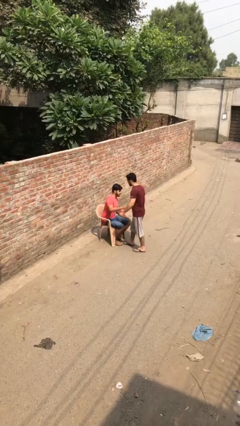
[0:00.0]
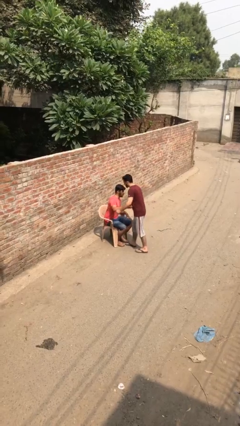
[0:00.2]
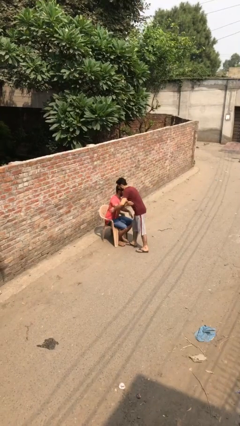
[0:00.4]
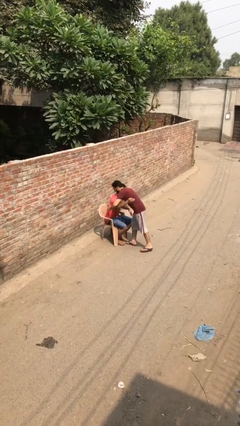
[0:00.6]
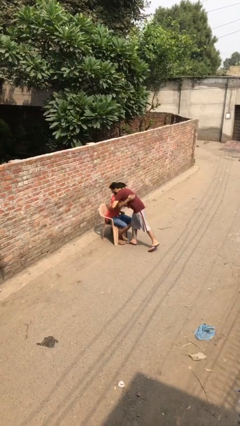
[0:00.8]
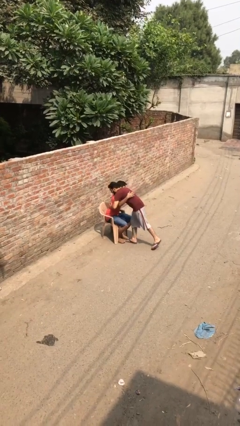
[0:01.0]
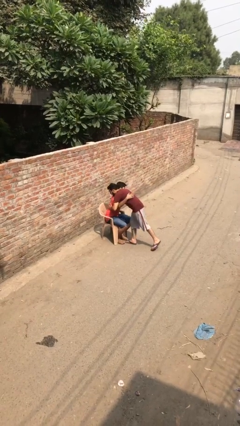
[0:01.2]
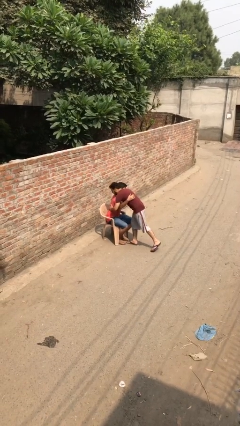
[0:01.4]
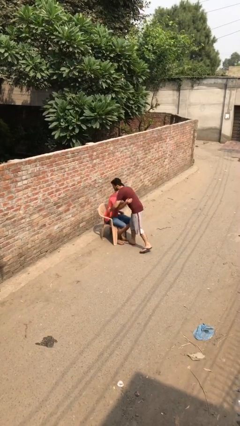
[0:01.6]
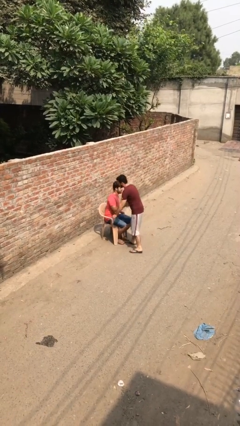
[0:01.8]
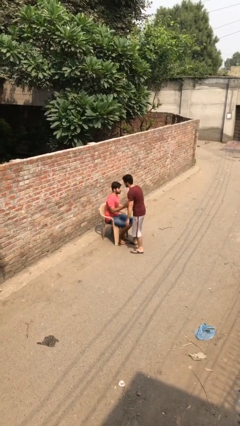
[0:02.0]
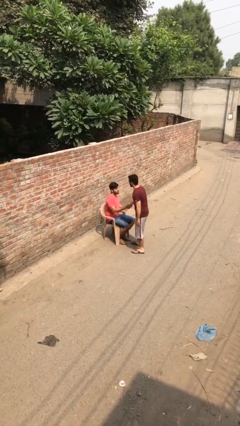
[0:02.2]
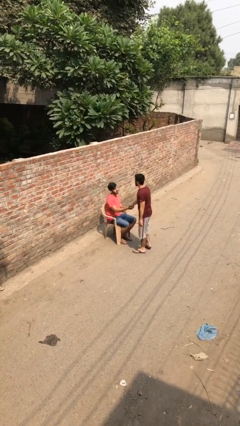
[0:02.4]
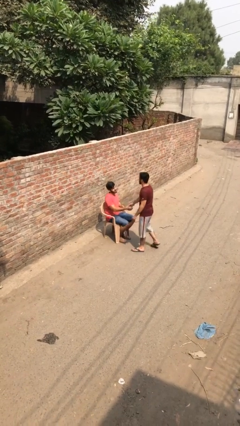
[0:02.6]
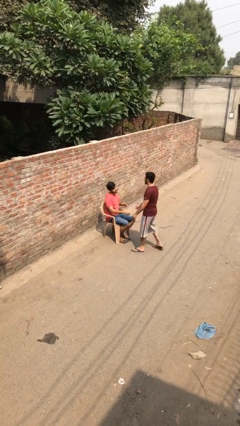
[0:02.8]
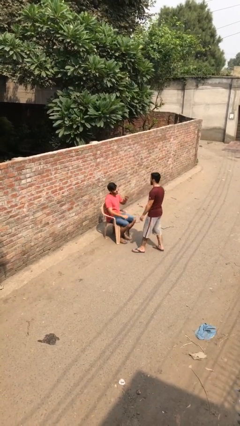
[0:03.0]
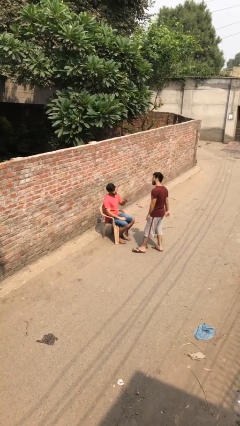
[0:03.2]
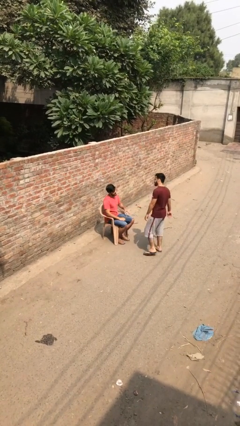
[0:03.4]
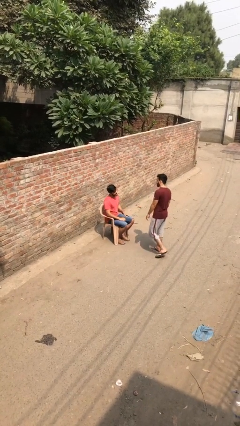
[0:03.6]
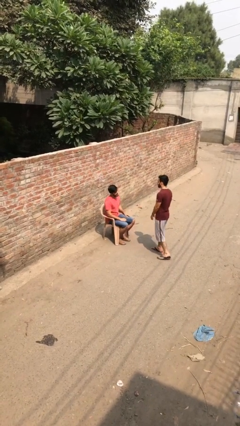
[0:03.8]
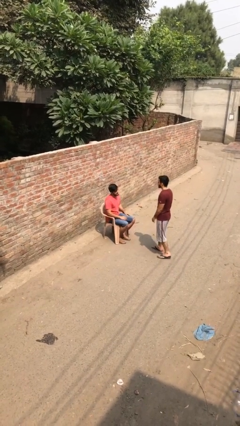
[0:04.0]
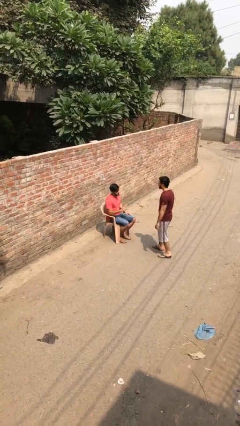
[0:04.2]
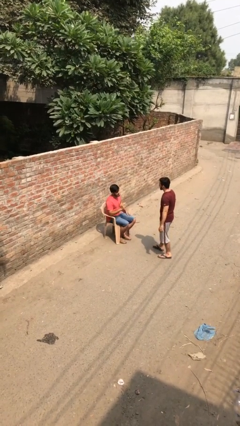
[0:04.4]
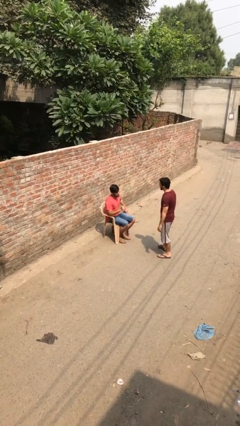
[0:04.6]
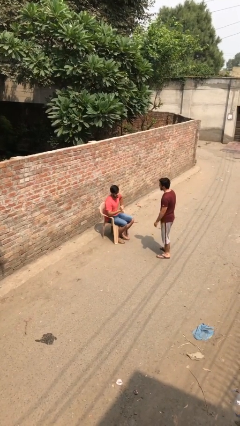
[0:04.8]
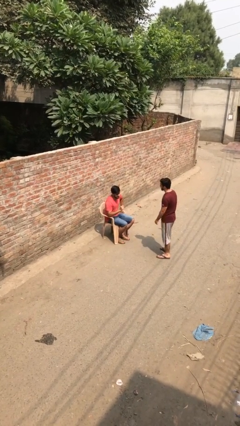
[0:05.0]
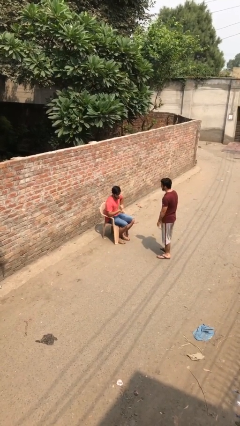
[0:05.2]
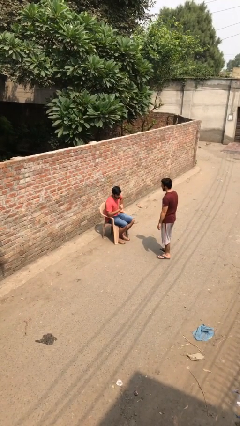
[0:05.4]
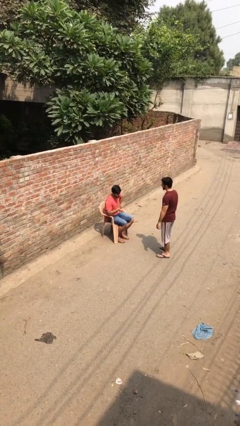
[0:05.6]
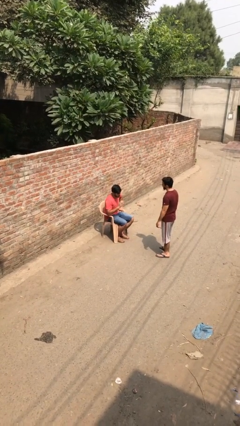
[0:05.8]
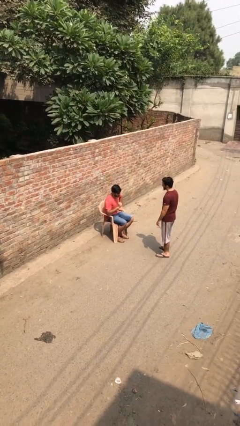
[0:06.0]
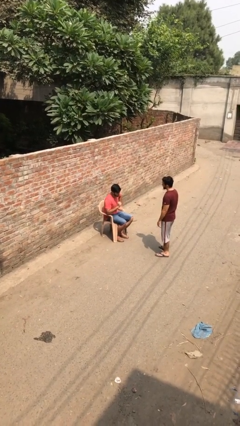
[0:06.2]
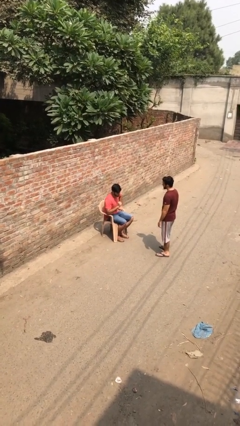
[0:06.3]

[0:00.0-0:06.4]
person embraces person

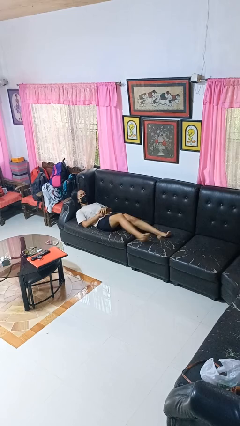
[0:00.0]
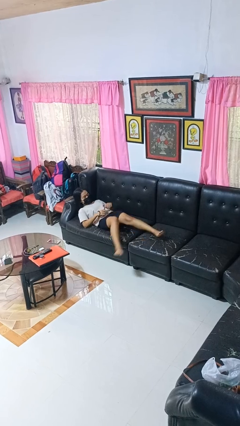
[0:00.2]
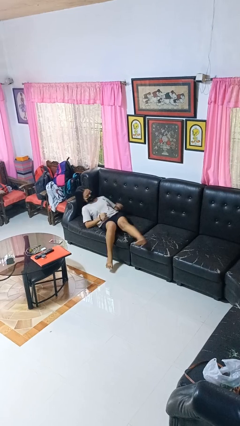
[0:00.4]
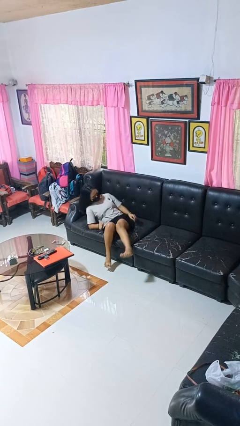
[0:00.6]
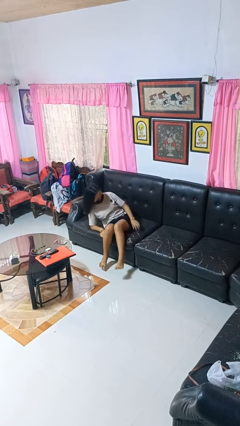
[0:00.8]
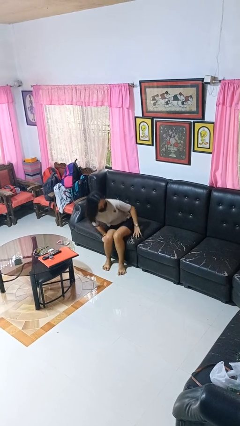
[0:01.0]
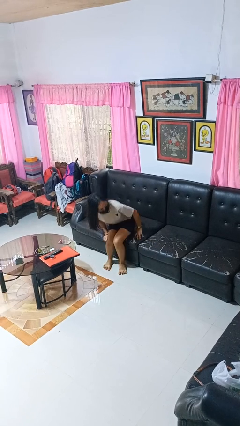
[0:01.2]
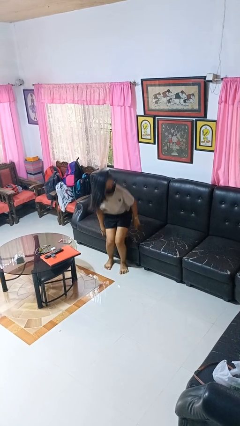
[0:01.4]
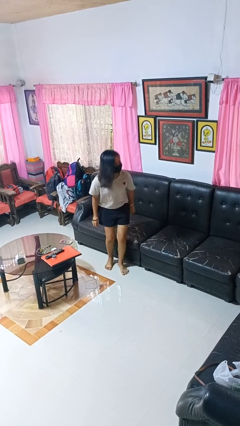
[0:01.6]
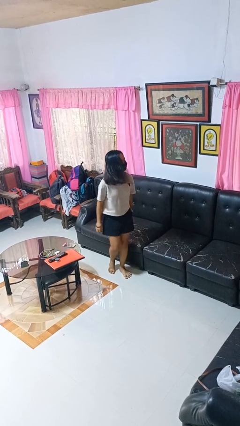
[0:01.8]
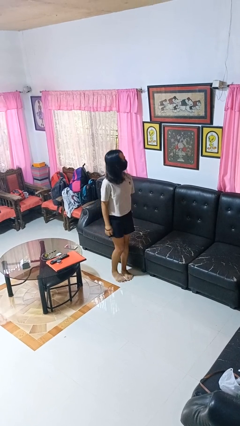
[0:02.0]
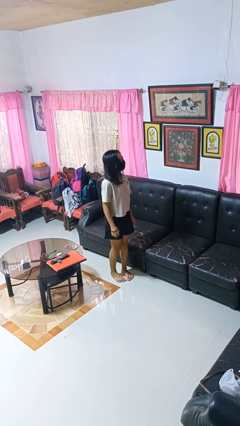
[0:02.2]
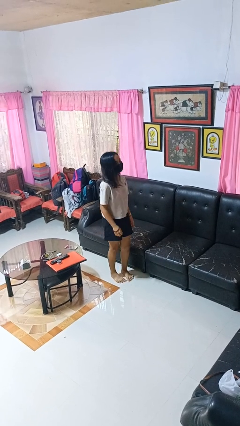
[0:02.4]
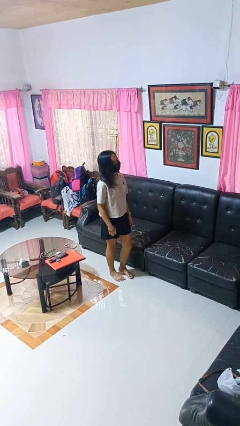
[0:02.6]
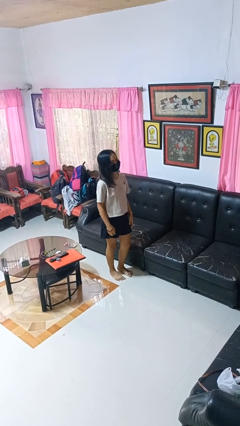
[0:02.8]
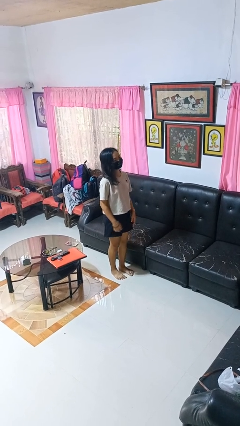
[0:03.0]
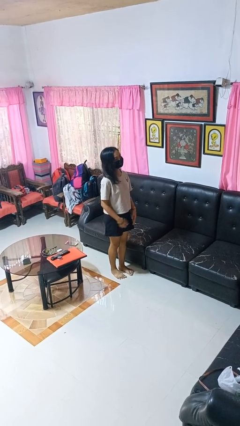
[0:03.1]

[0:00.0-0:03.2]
person stands up

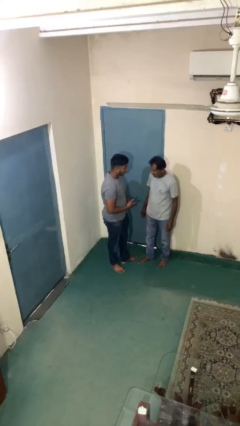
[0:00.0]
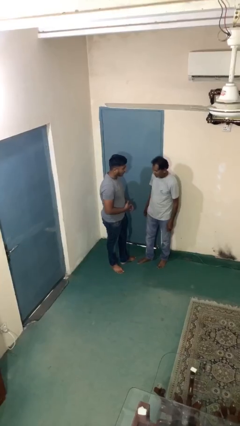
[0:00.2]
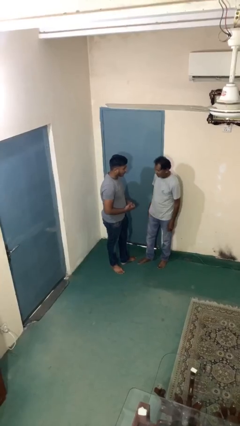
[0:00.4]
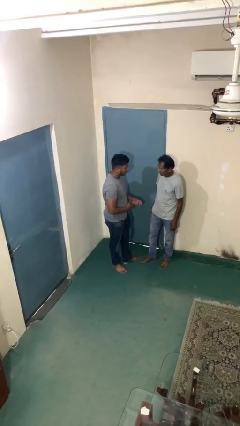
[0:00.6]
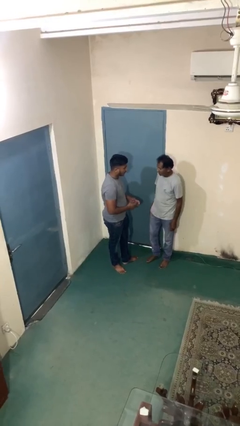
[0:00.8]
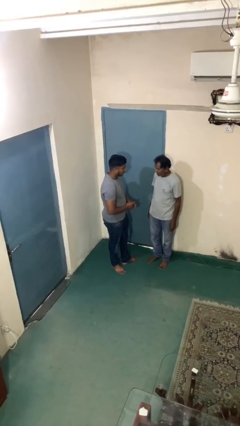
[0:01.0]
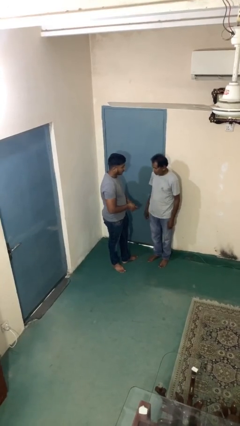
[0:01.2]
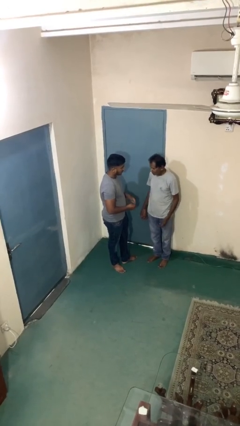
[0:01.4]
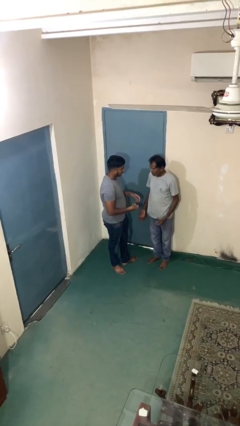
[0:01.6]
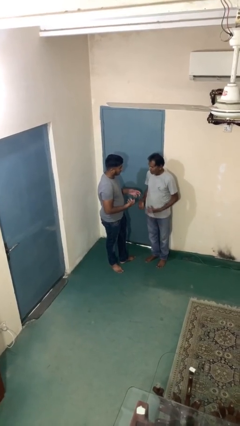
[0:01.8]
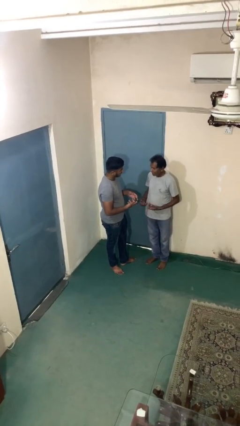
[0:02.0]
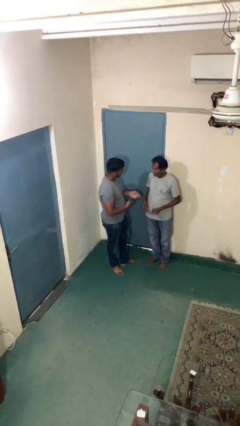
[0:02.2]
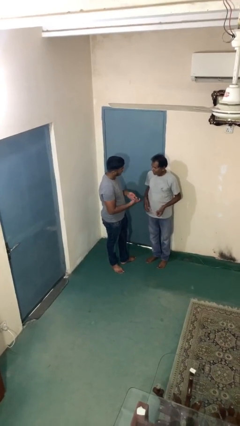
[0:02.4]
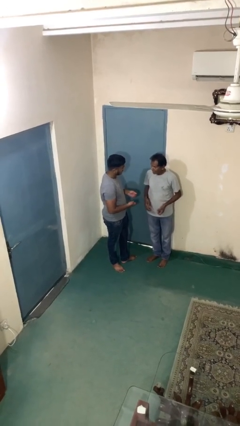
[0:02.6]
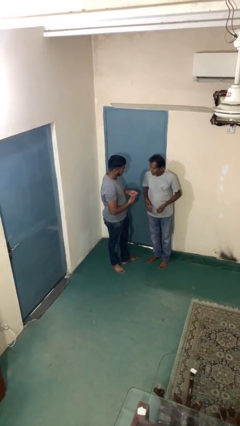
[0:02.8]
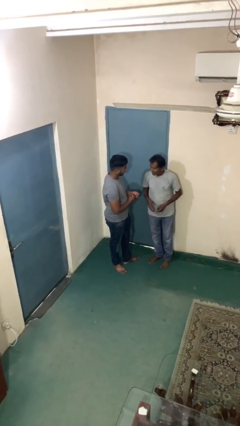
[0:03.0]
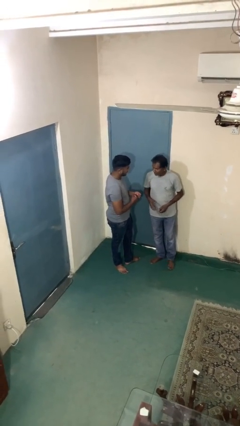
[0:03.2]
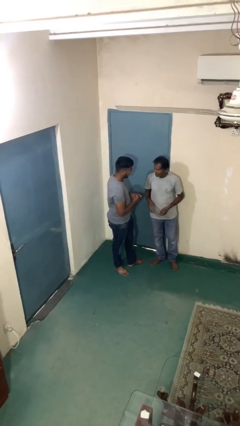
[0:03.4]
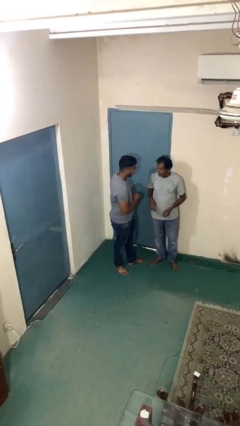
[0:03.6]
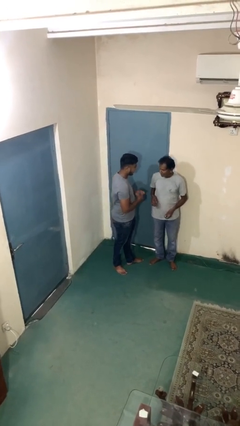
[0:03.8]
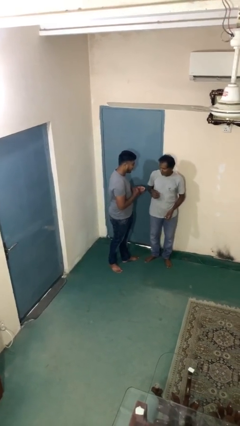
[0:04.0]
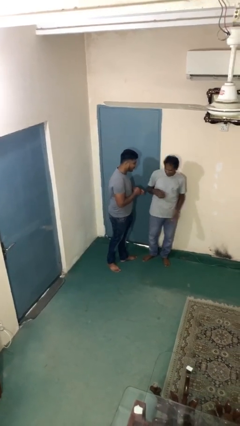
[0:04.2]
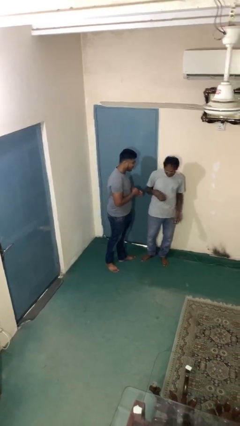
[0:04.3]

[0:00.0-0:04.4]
person talks to person

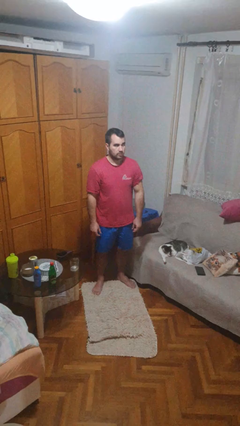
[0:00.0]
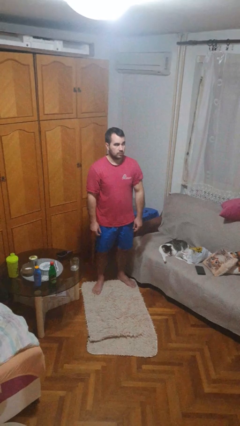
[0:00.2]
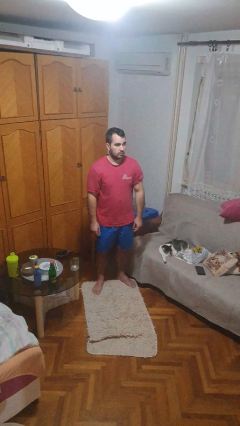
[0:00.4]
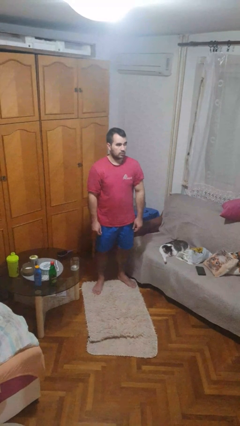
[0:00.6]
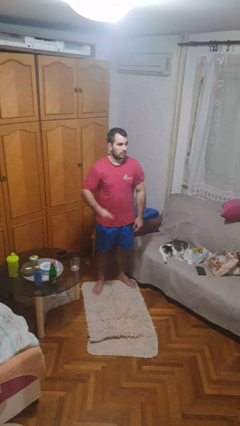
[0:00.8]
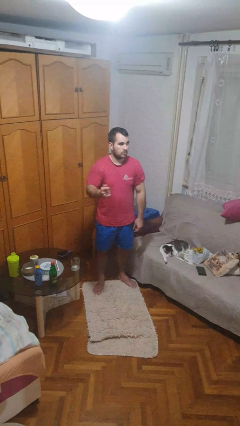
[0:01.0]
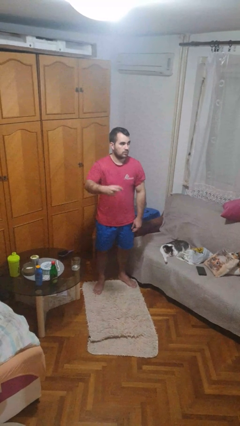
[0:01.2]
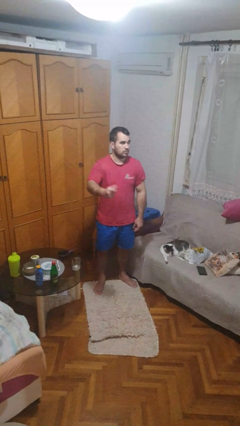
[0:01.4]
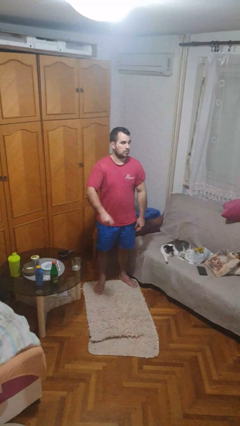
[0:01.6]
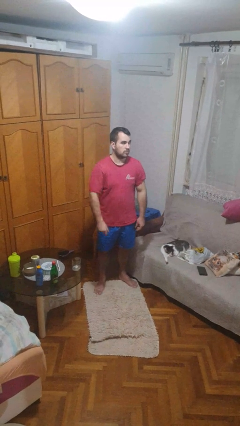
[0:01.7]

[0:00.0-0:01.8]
person snaps fingers

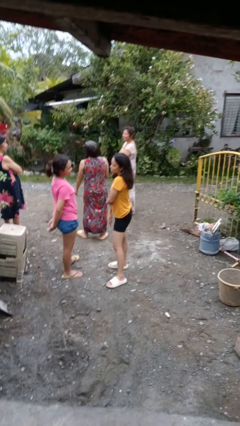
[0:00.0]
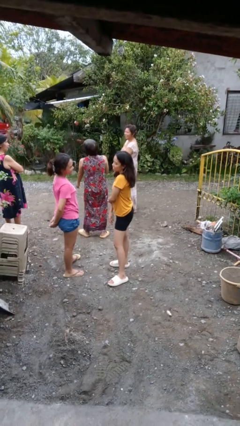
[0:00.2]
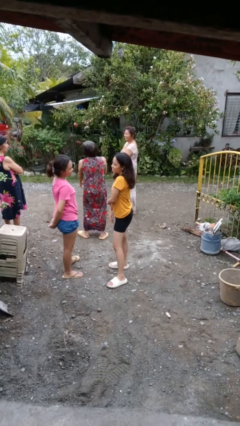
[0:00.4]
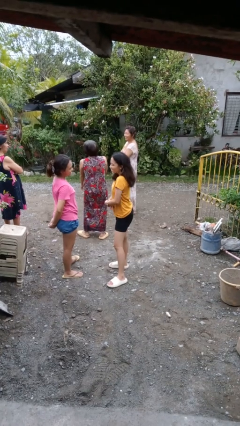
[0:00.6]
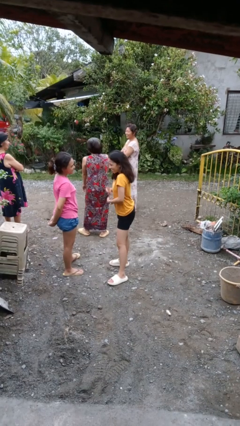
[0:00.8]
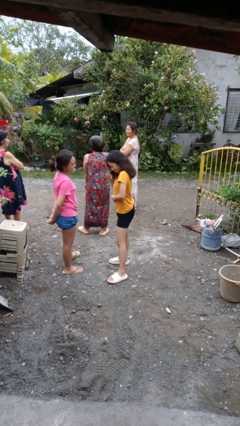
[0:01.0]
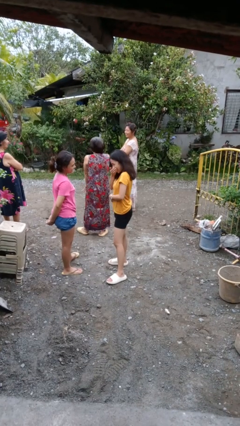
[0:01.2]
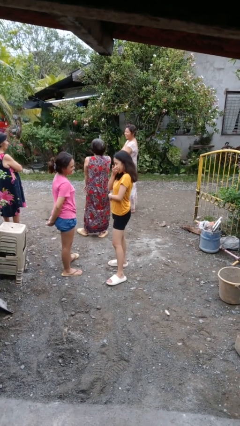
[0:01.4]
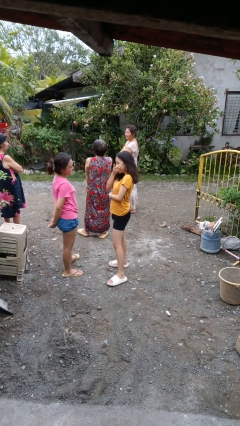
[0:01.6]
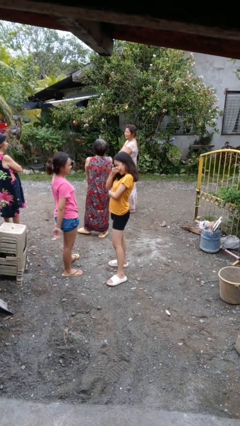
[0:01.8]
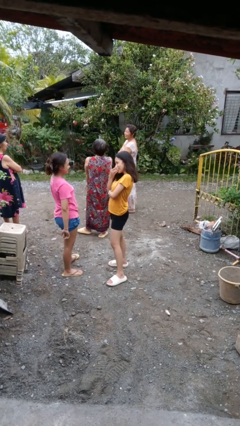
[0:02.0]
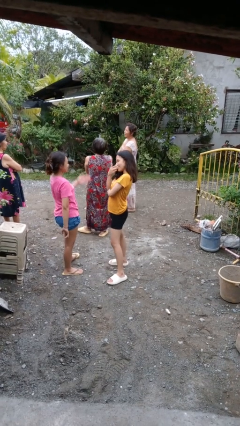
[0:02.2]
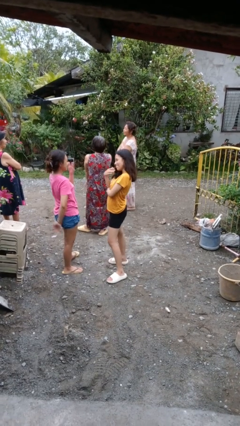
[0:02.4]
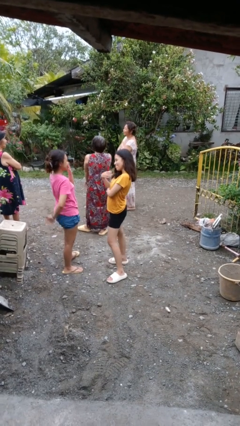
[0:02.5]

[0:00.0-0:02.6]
person laughs with person
